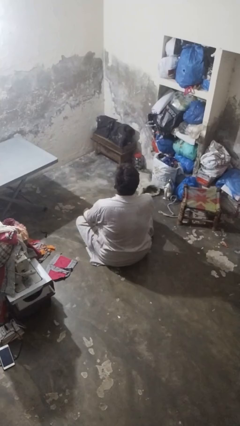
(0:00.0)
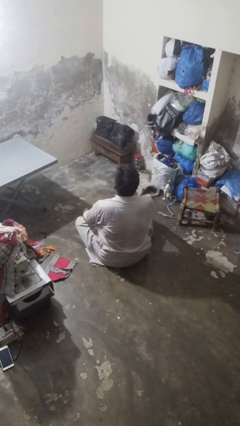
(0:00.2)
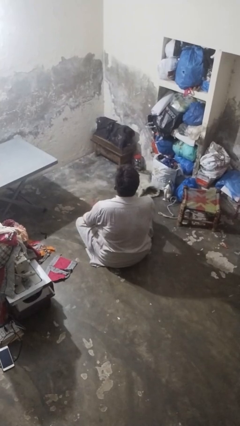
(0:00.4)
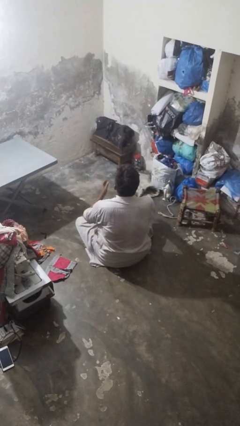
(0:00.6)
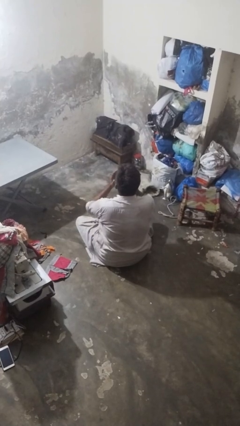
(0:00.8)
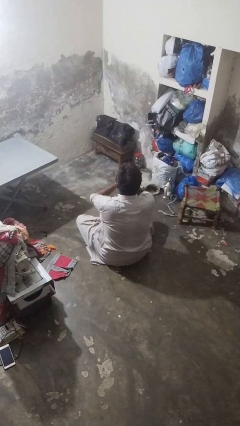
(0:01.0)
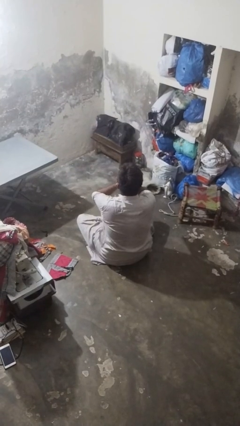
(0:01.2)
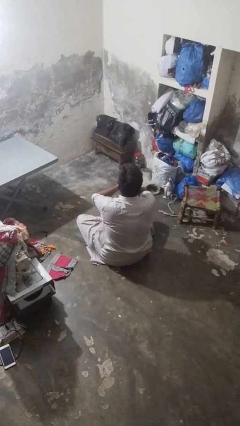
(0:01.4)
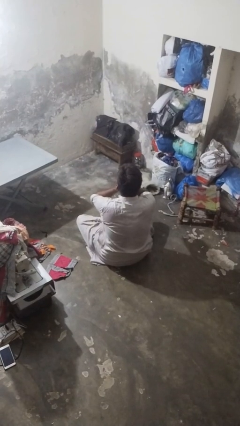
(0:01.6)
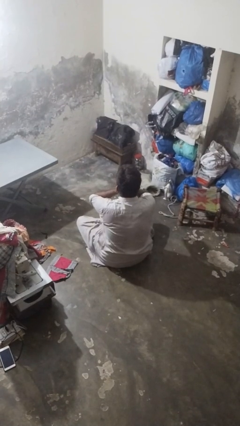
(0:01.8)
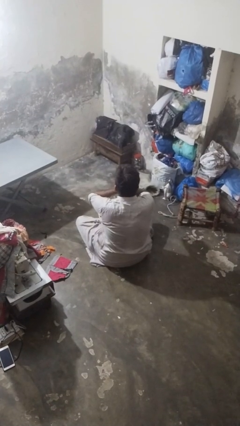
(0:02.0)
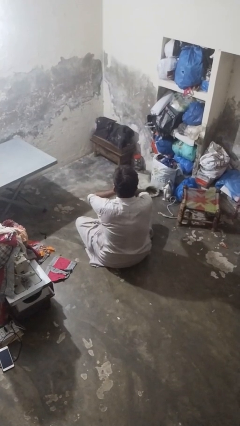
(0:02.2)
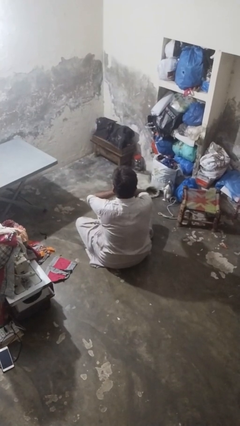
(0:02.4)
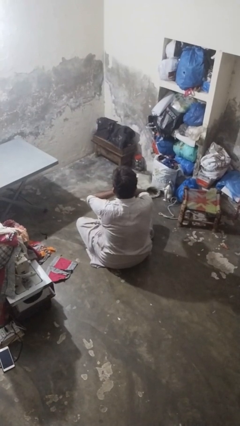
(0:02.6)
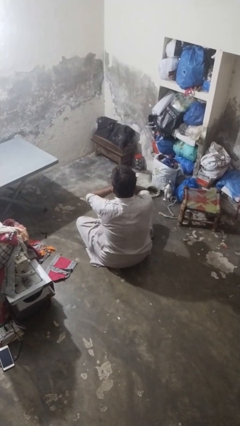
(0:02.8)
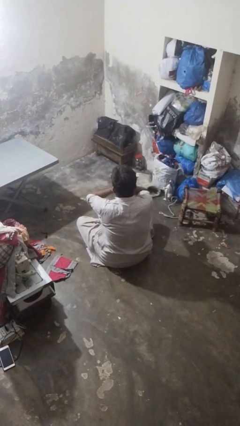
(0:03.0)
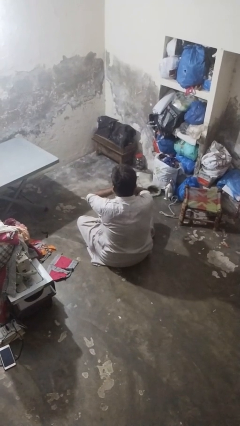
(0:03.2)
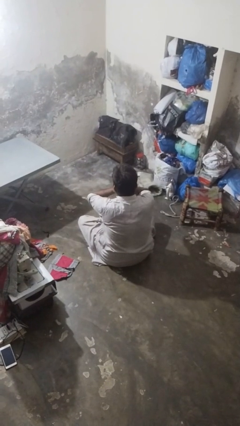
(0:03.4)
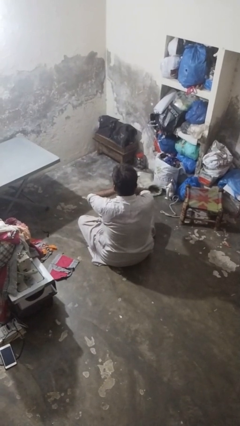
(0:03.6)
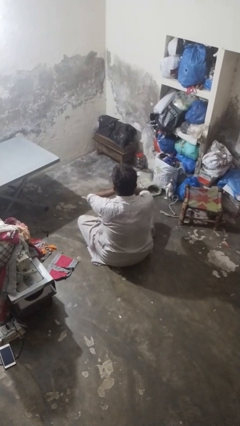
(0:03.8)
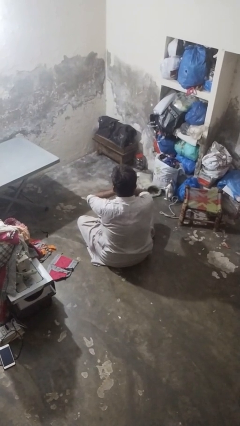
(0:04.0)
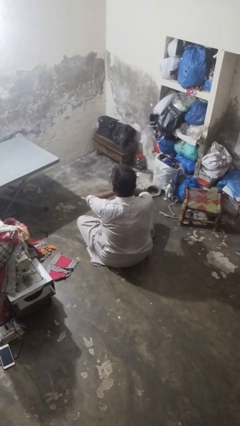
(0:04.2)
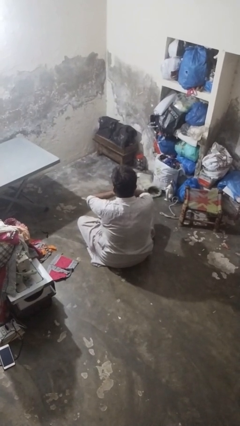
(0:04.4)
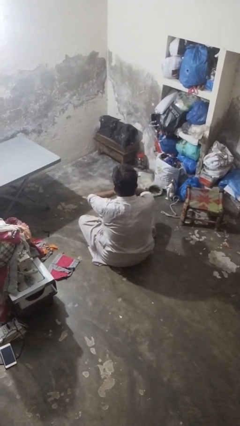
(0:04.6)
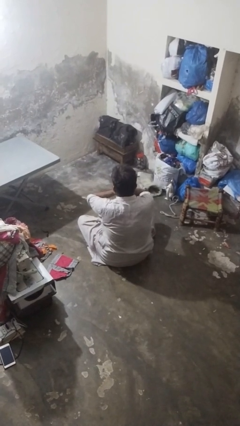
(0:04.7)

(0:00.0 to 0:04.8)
person covers face with hands

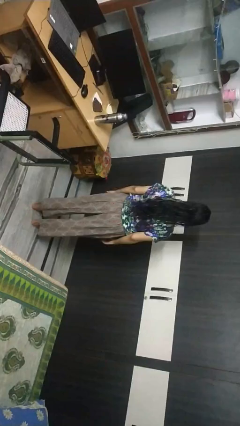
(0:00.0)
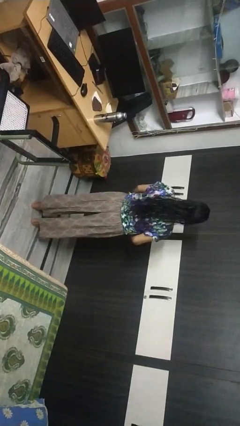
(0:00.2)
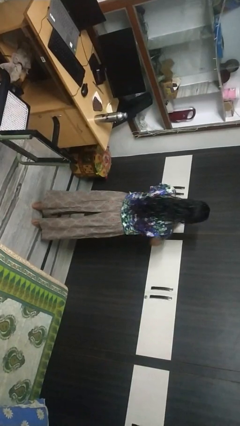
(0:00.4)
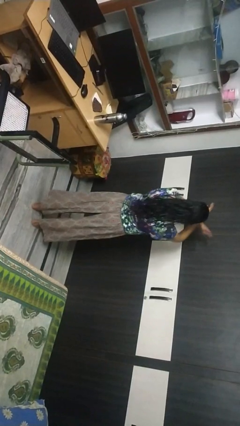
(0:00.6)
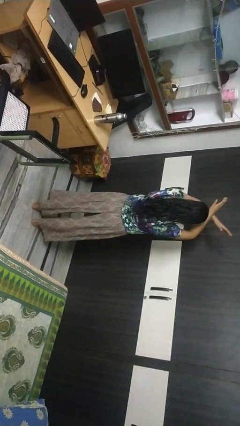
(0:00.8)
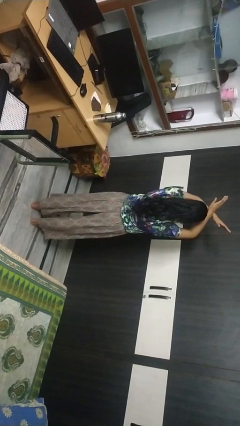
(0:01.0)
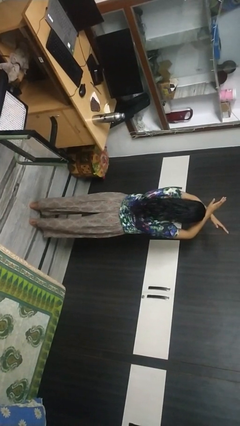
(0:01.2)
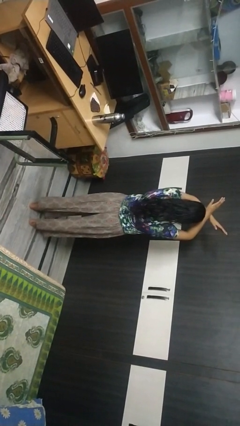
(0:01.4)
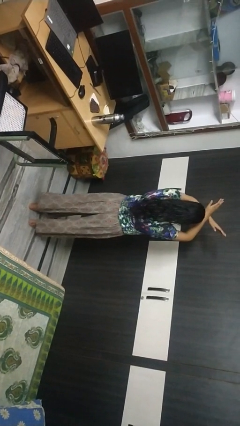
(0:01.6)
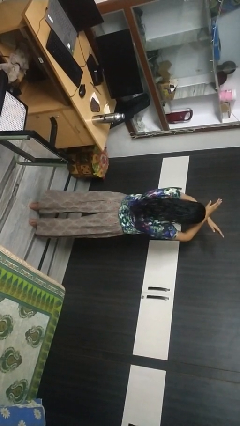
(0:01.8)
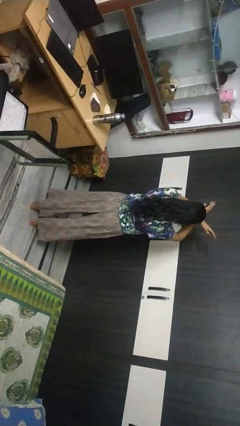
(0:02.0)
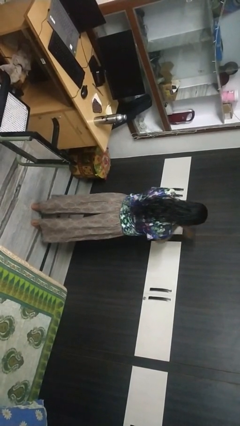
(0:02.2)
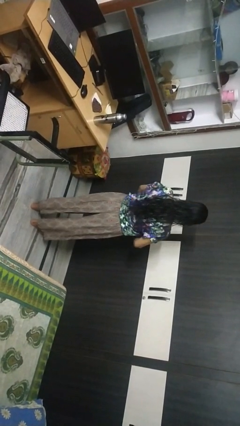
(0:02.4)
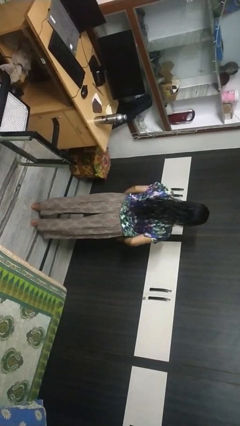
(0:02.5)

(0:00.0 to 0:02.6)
person gestures arms x

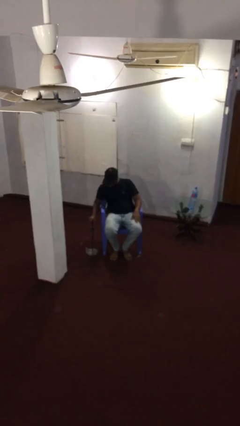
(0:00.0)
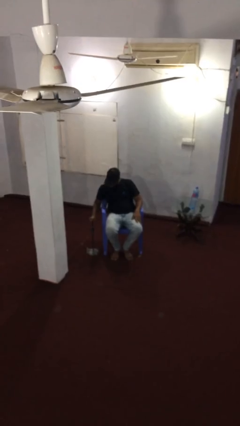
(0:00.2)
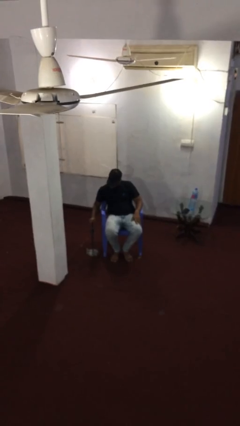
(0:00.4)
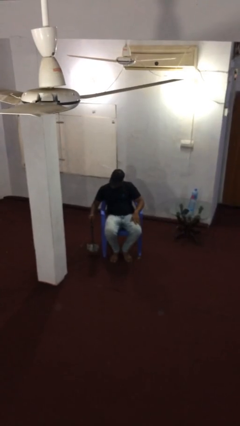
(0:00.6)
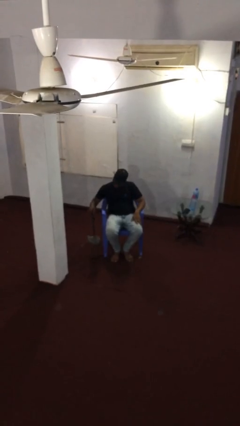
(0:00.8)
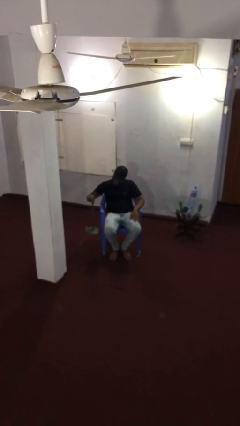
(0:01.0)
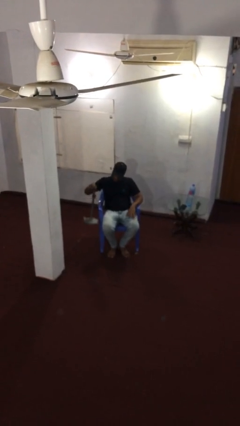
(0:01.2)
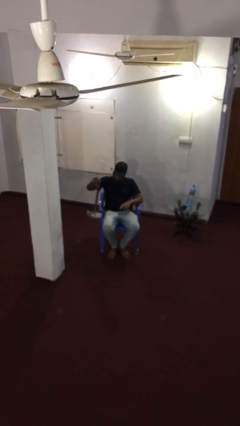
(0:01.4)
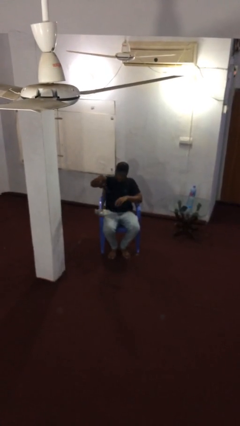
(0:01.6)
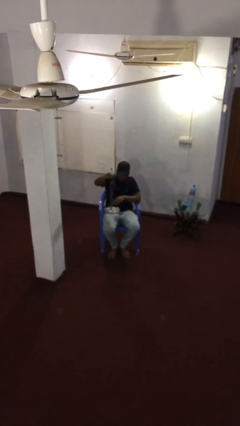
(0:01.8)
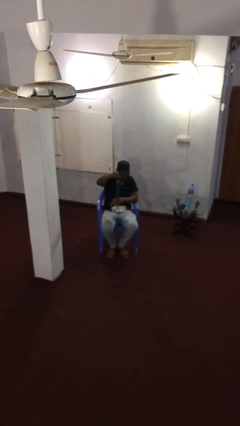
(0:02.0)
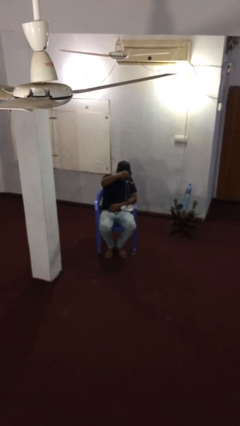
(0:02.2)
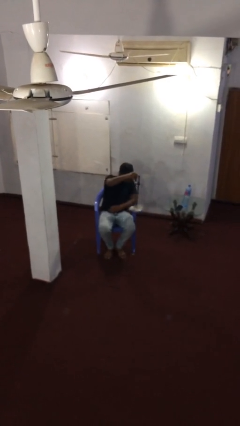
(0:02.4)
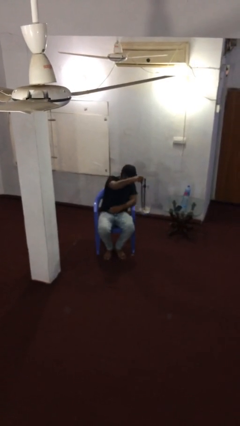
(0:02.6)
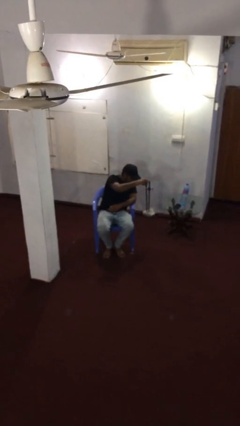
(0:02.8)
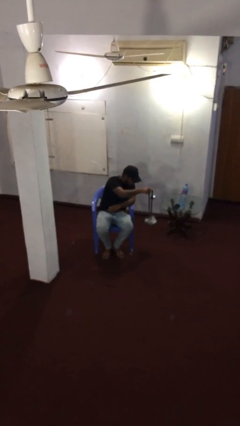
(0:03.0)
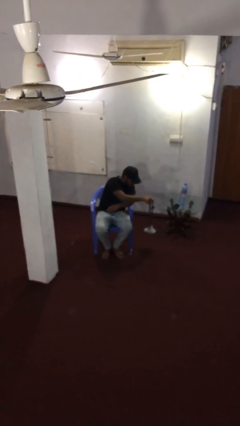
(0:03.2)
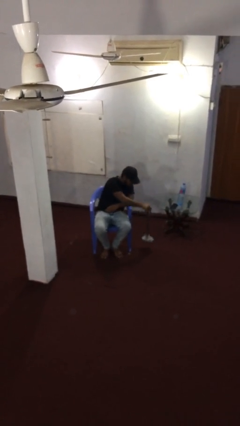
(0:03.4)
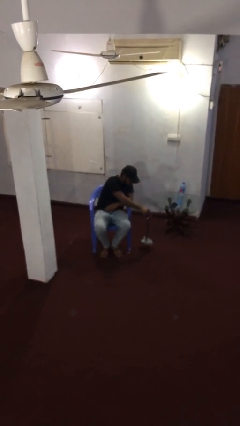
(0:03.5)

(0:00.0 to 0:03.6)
person picks up object from floor

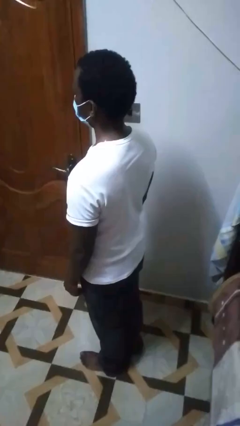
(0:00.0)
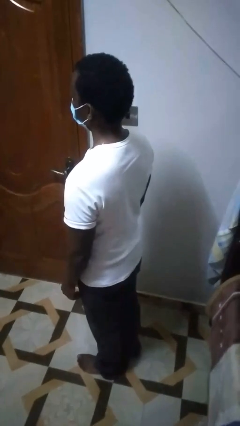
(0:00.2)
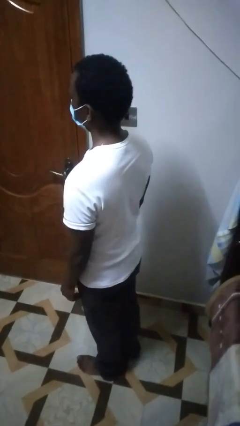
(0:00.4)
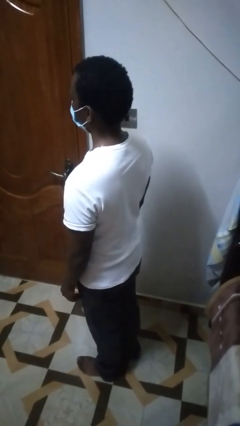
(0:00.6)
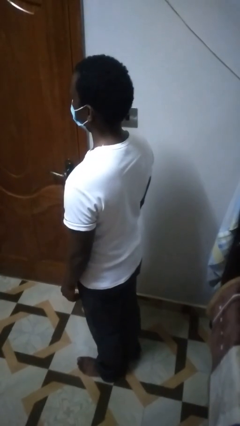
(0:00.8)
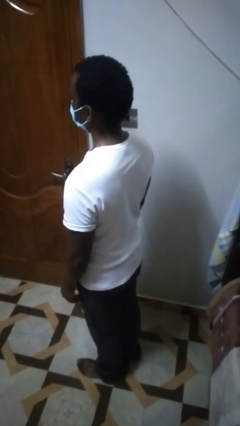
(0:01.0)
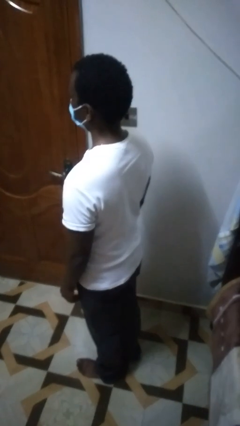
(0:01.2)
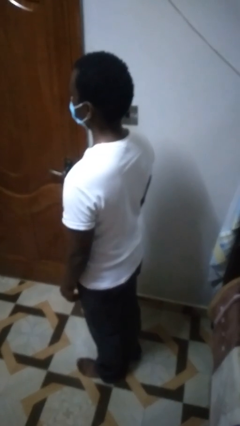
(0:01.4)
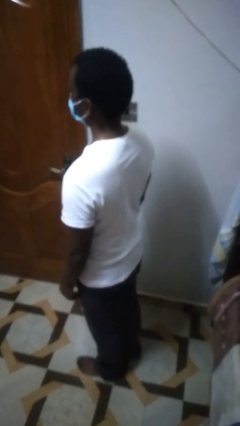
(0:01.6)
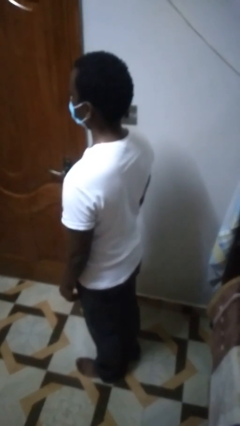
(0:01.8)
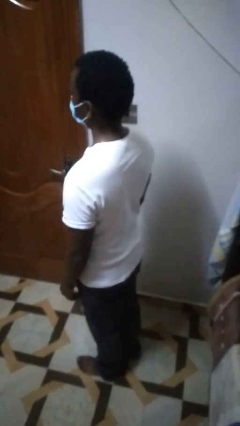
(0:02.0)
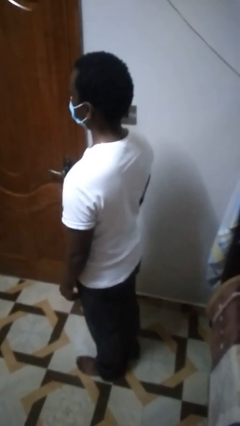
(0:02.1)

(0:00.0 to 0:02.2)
person drums on chest

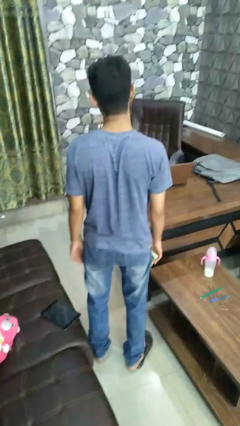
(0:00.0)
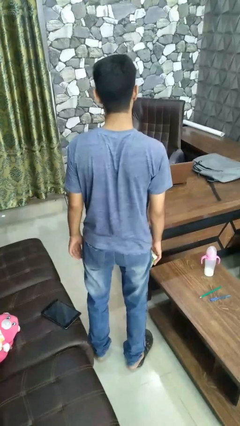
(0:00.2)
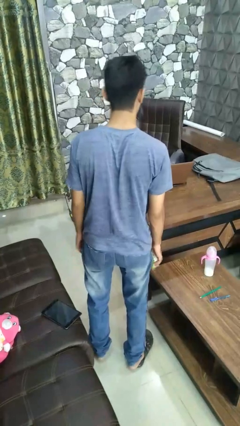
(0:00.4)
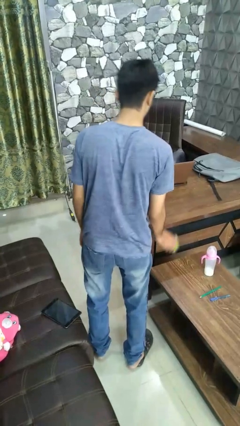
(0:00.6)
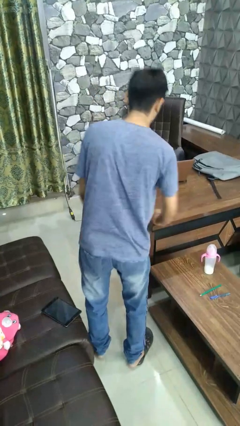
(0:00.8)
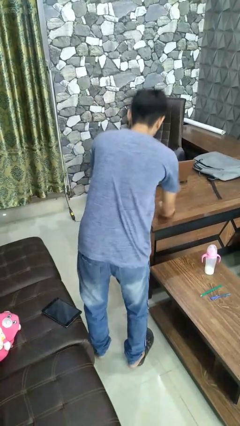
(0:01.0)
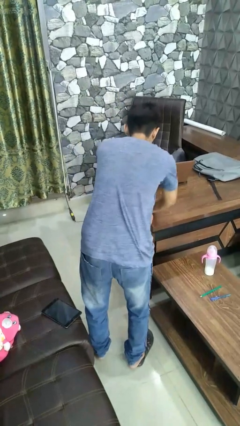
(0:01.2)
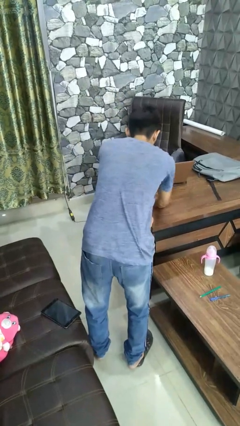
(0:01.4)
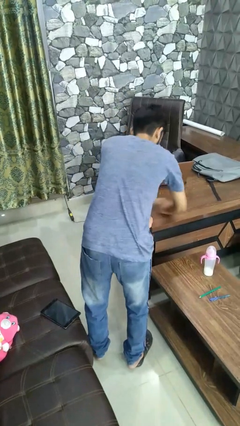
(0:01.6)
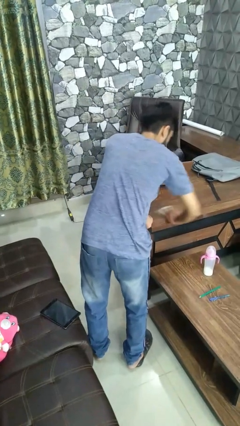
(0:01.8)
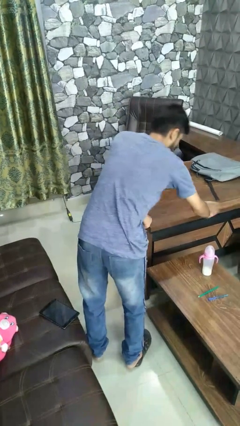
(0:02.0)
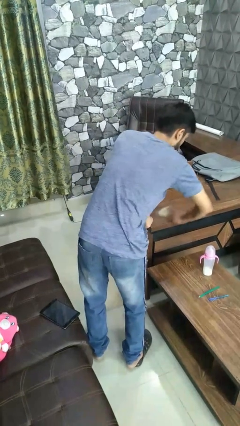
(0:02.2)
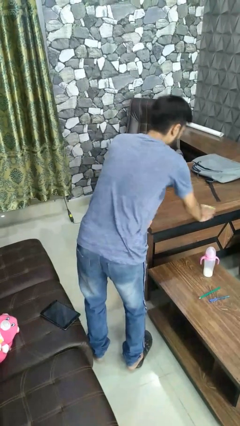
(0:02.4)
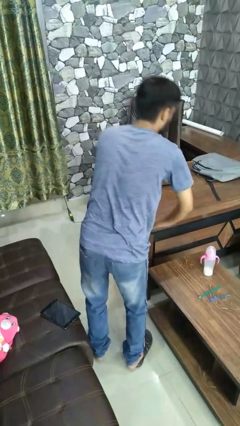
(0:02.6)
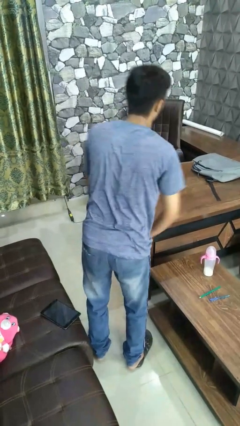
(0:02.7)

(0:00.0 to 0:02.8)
person dusts furniture

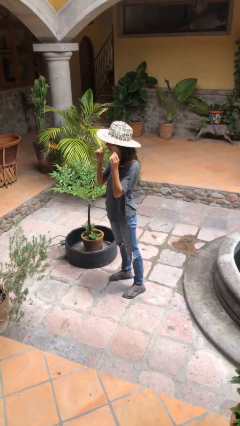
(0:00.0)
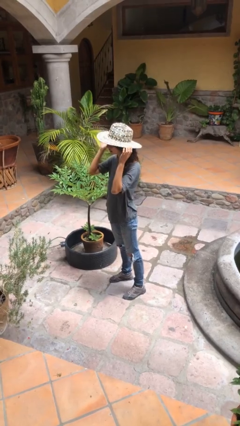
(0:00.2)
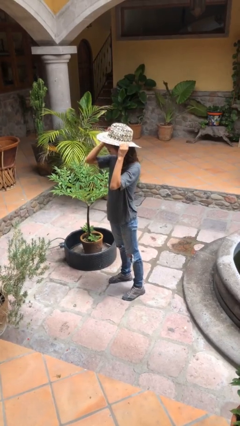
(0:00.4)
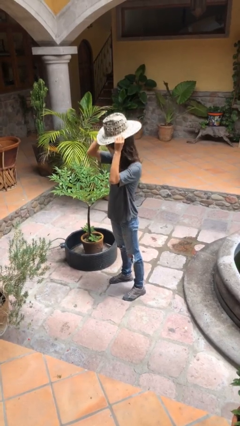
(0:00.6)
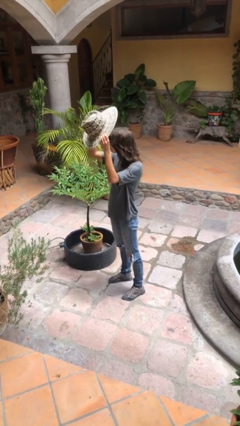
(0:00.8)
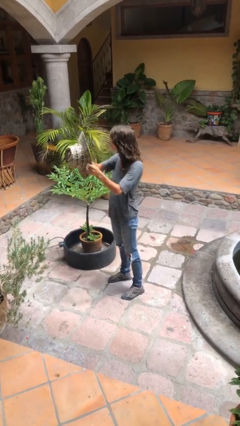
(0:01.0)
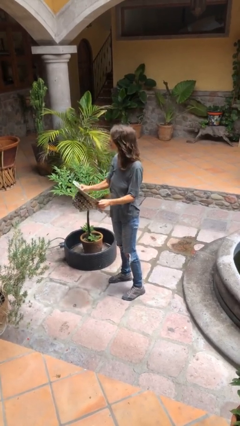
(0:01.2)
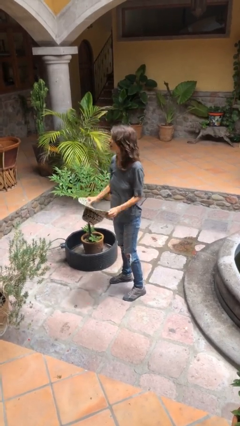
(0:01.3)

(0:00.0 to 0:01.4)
person takes off hat

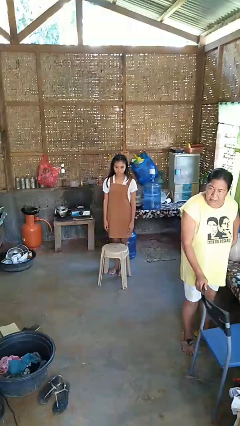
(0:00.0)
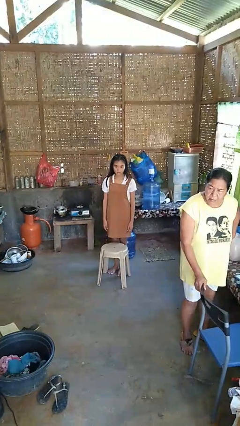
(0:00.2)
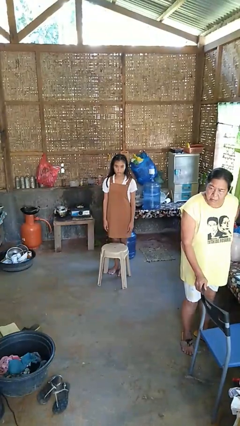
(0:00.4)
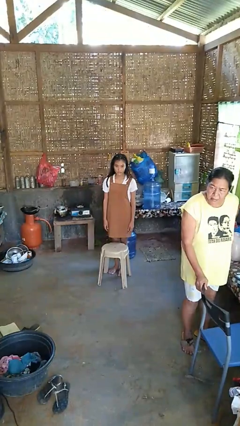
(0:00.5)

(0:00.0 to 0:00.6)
person knocks over furniture
